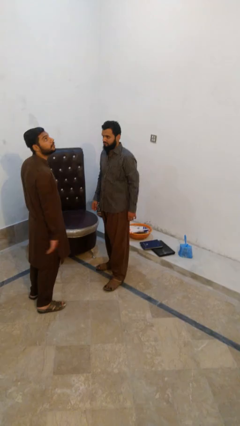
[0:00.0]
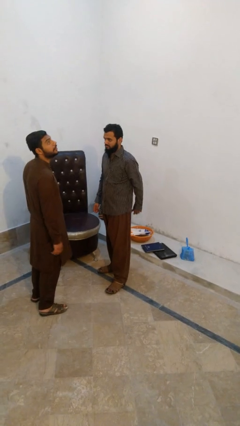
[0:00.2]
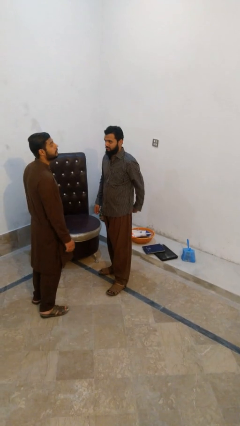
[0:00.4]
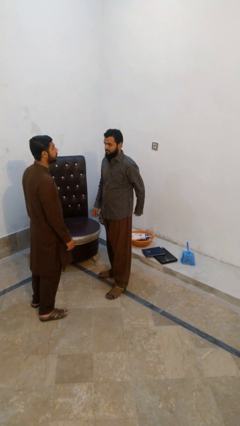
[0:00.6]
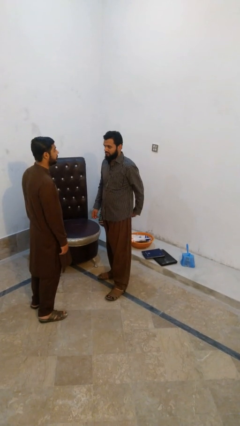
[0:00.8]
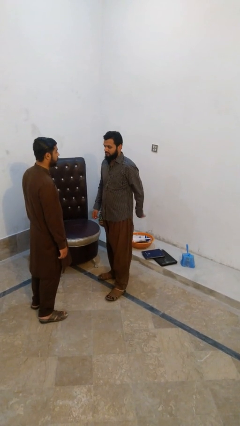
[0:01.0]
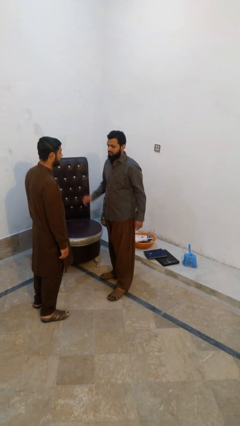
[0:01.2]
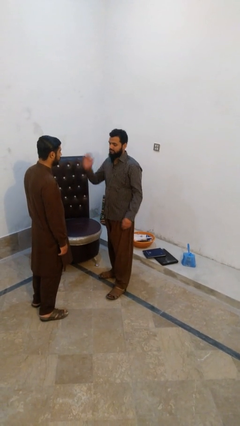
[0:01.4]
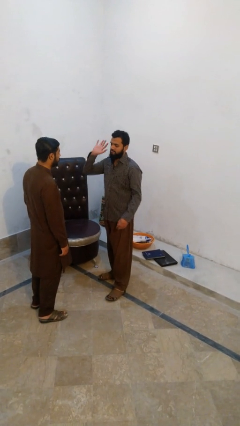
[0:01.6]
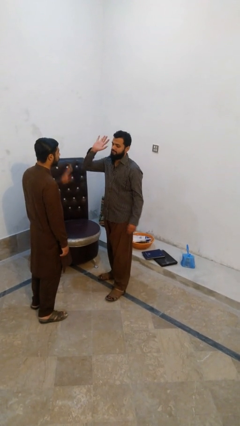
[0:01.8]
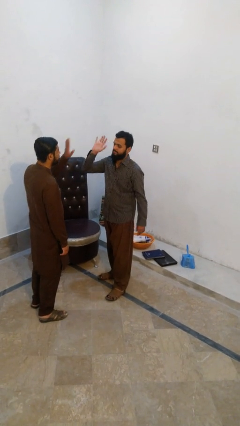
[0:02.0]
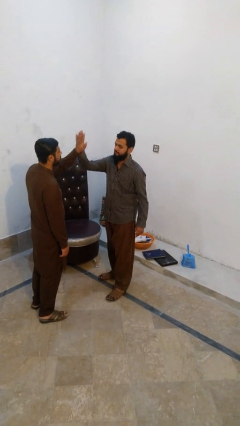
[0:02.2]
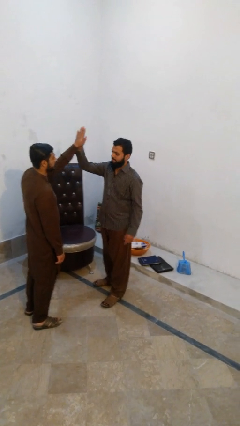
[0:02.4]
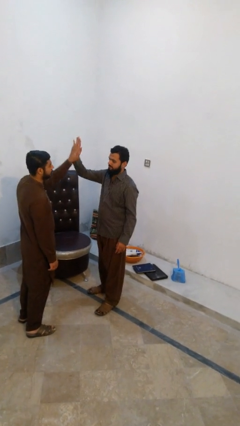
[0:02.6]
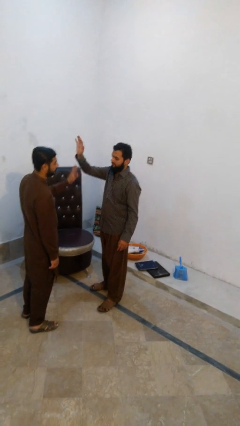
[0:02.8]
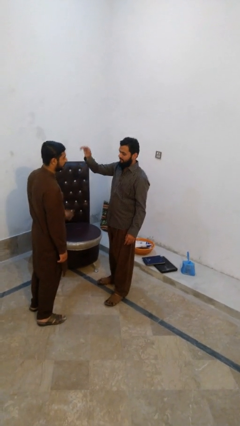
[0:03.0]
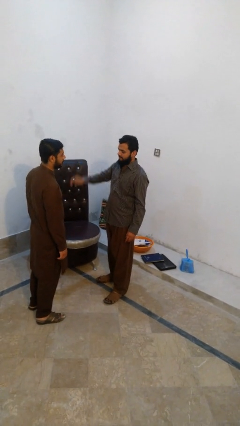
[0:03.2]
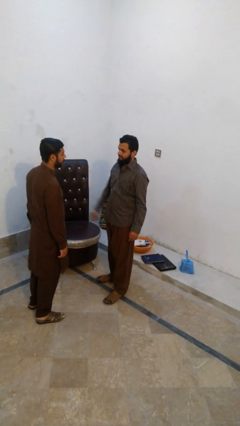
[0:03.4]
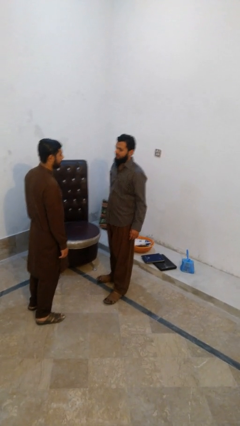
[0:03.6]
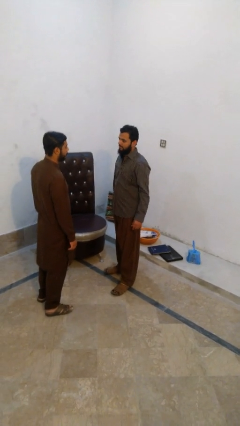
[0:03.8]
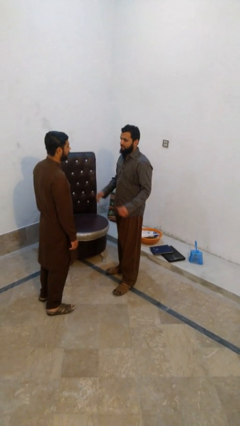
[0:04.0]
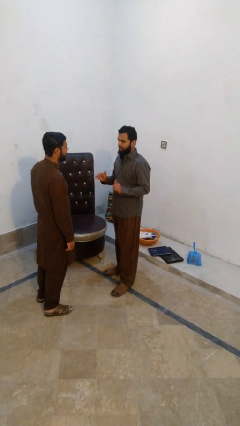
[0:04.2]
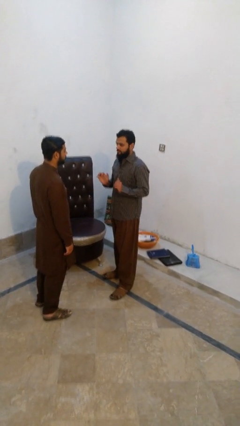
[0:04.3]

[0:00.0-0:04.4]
person highfives hand

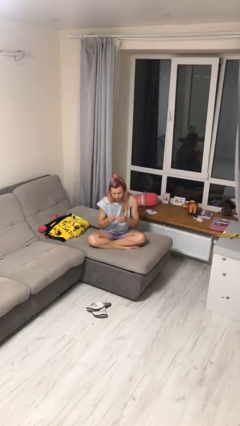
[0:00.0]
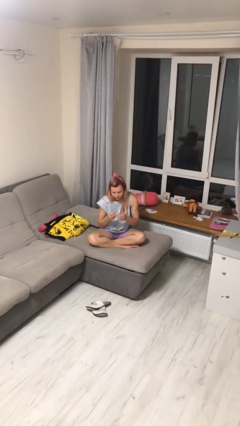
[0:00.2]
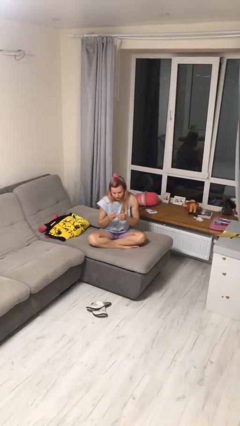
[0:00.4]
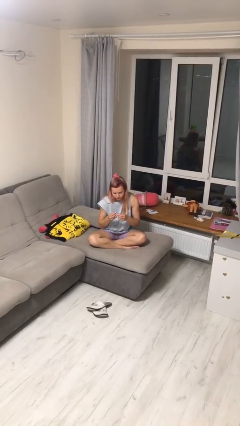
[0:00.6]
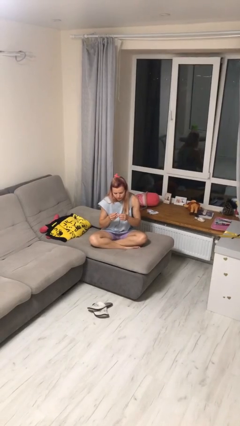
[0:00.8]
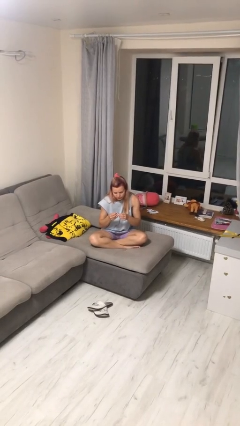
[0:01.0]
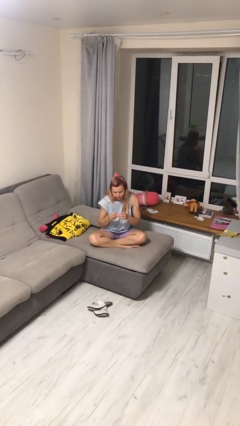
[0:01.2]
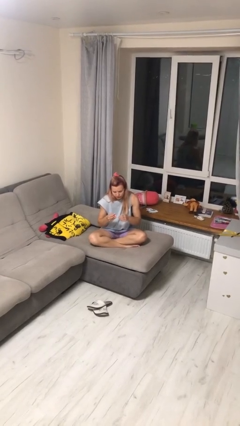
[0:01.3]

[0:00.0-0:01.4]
person clips fingernails

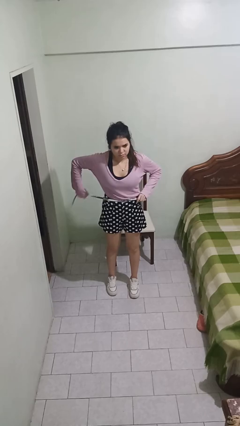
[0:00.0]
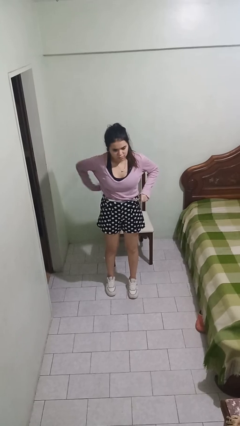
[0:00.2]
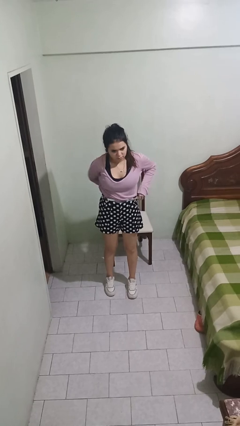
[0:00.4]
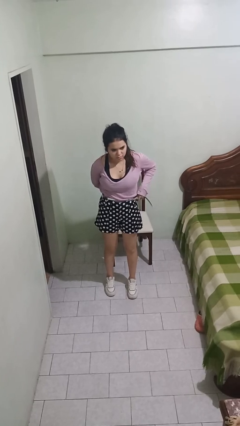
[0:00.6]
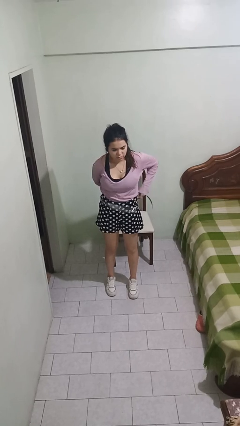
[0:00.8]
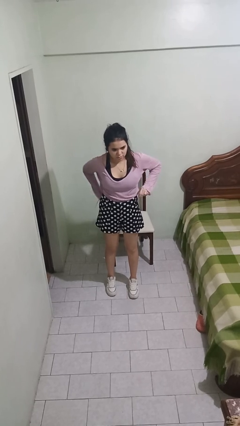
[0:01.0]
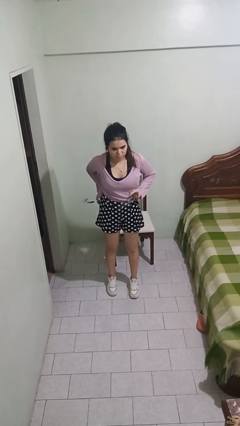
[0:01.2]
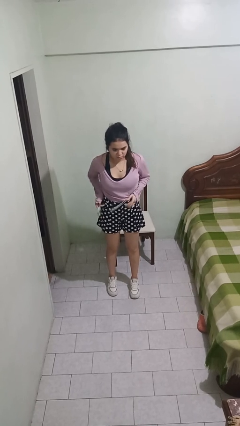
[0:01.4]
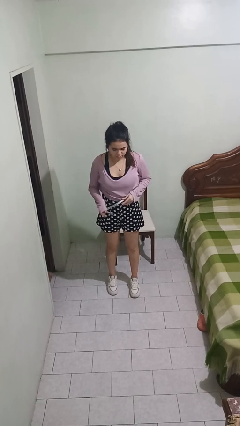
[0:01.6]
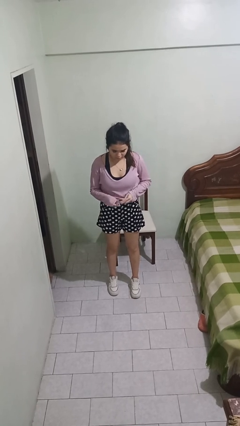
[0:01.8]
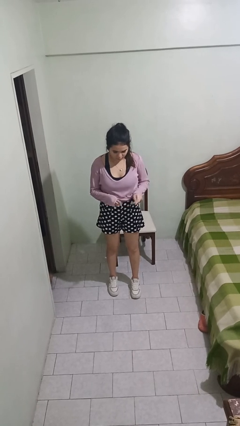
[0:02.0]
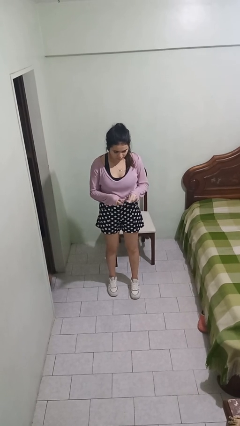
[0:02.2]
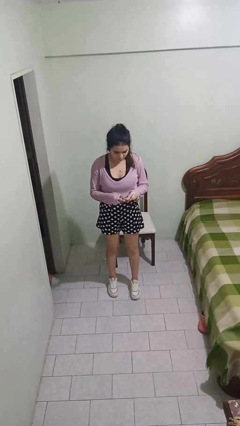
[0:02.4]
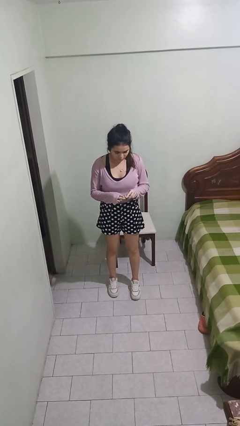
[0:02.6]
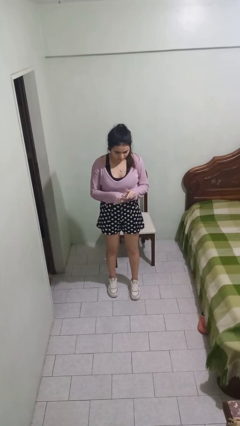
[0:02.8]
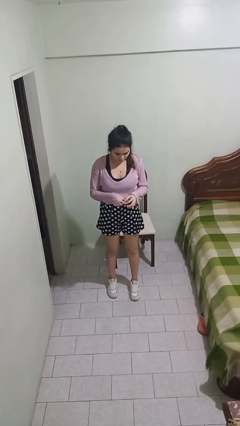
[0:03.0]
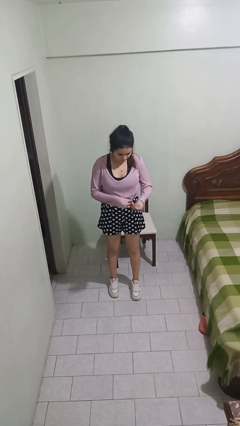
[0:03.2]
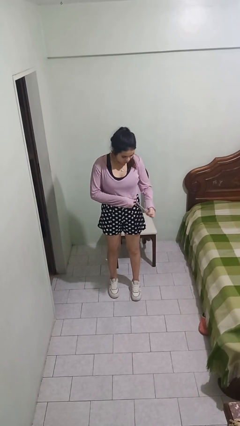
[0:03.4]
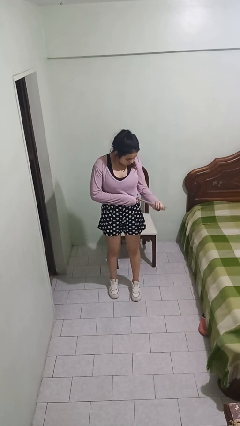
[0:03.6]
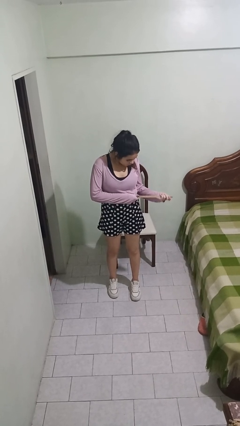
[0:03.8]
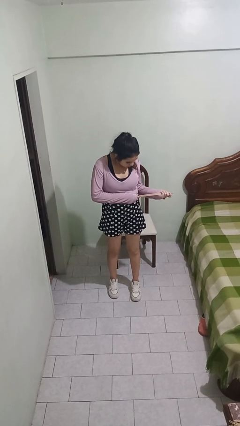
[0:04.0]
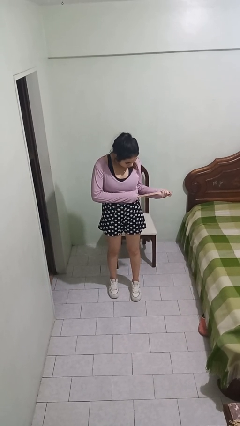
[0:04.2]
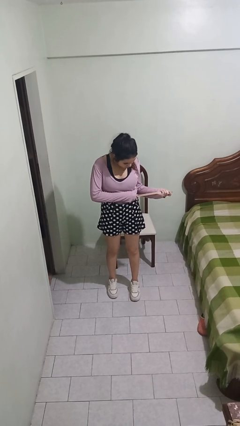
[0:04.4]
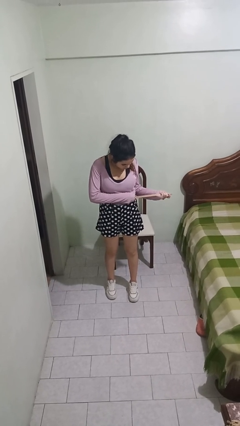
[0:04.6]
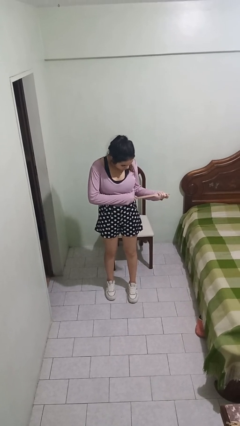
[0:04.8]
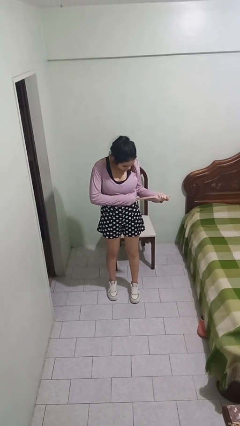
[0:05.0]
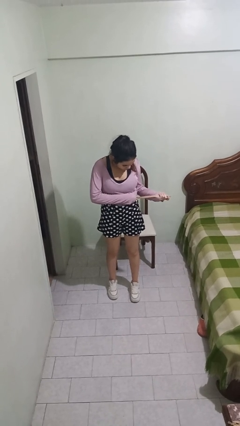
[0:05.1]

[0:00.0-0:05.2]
person puts on belt

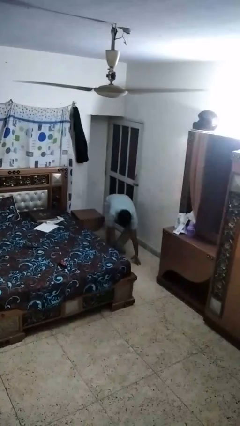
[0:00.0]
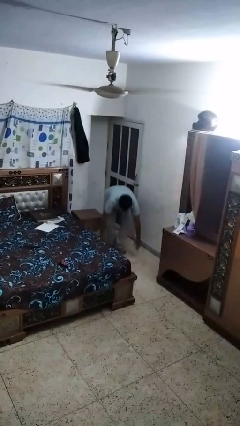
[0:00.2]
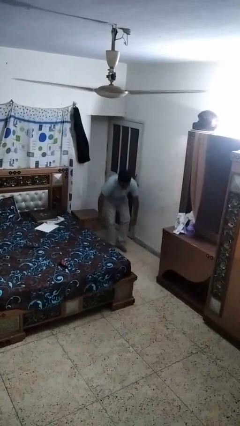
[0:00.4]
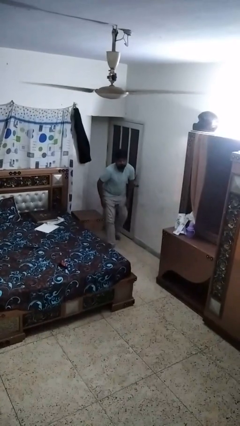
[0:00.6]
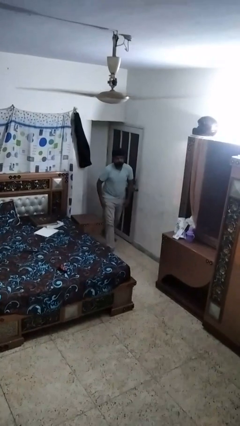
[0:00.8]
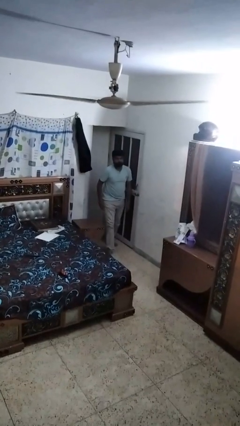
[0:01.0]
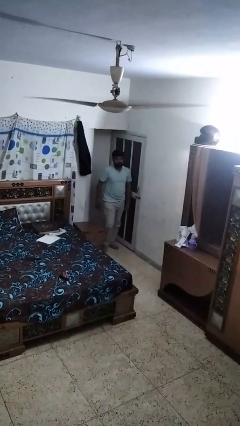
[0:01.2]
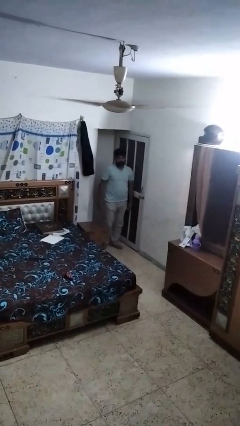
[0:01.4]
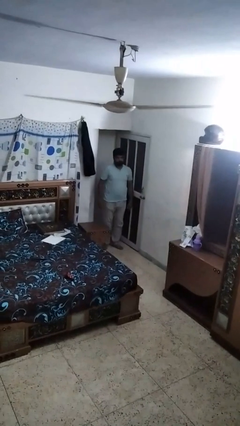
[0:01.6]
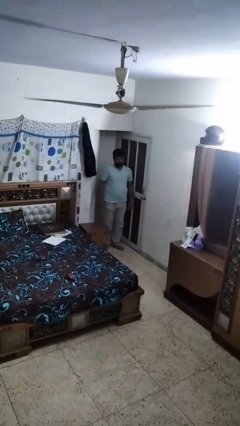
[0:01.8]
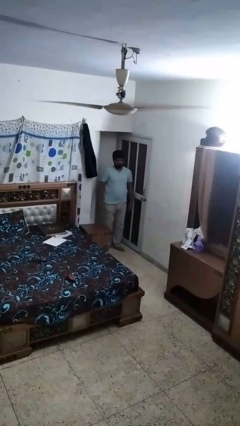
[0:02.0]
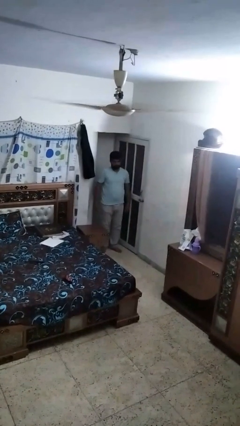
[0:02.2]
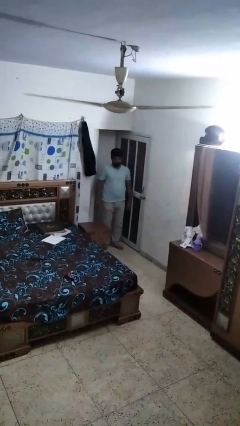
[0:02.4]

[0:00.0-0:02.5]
person stands up from floor

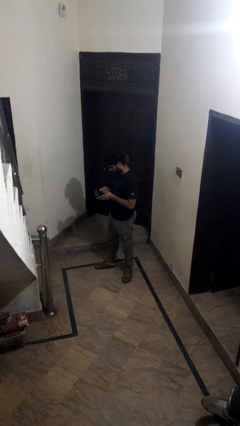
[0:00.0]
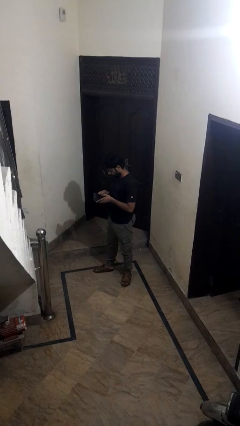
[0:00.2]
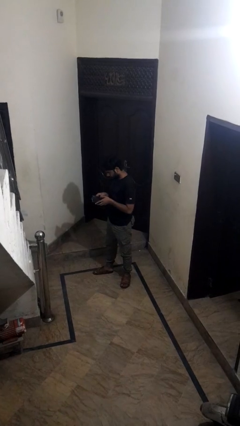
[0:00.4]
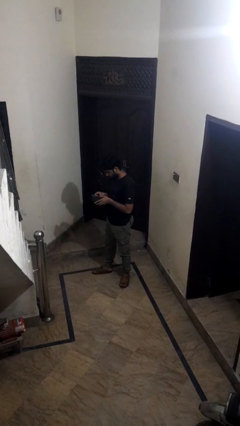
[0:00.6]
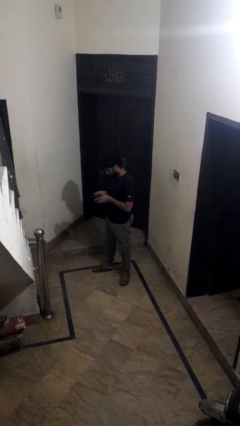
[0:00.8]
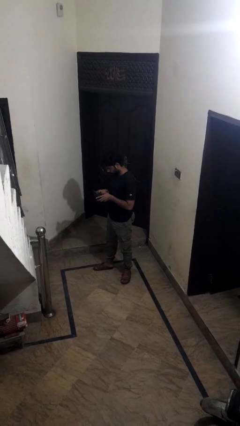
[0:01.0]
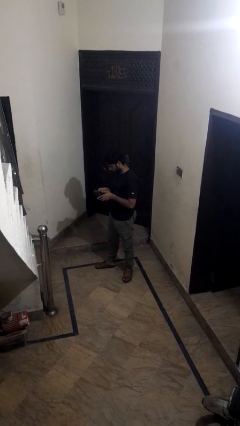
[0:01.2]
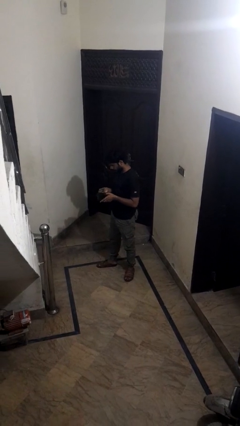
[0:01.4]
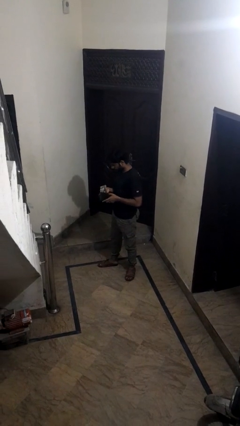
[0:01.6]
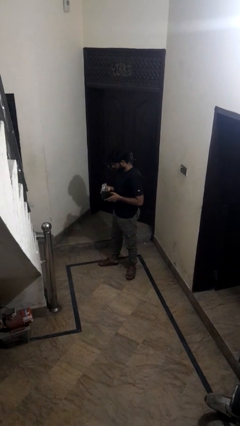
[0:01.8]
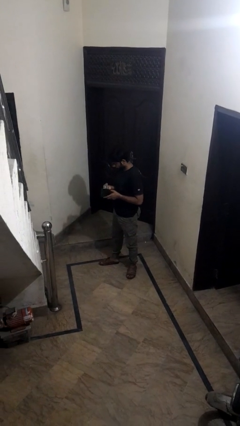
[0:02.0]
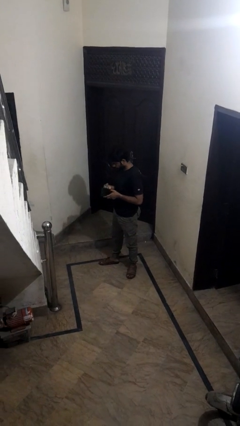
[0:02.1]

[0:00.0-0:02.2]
person takes object from purse

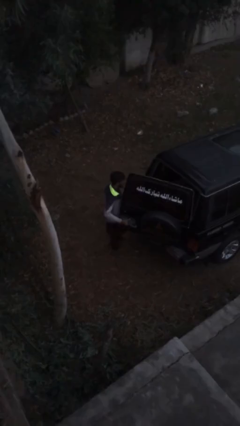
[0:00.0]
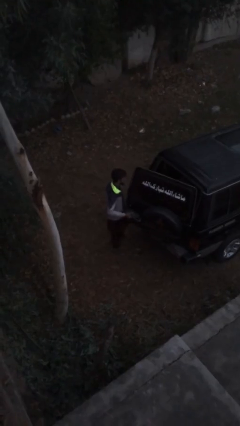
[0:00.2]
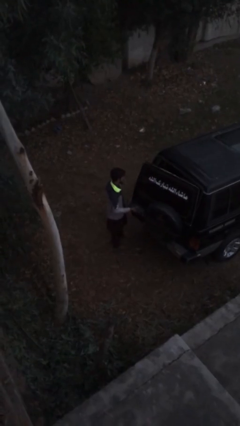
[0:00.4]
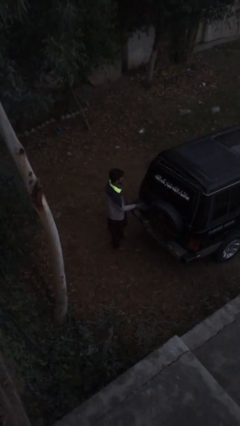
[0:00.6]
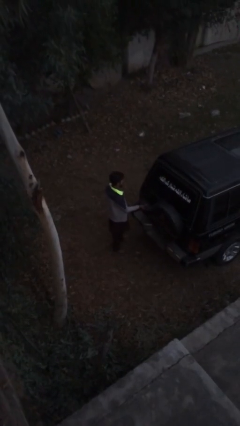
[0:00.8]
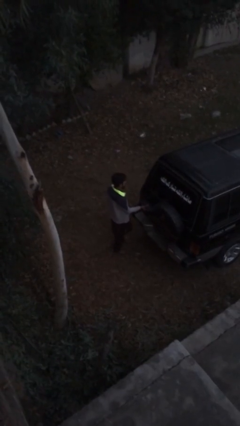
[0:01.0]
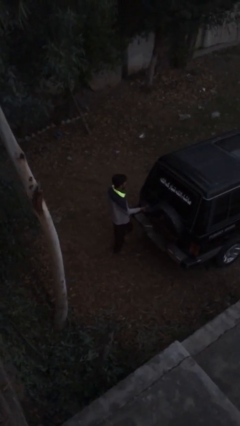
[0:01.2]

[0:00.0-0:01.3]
person closes car trunk

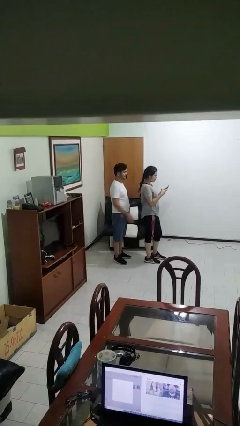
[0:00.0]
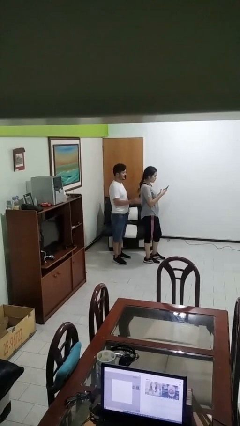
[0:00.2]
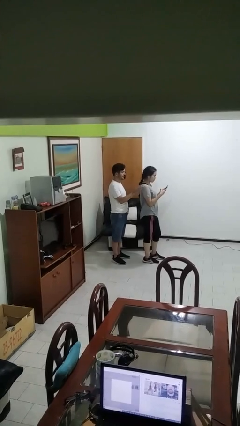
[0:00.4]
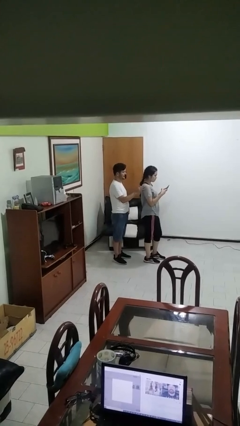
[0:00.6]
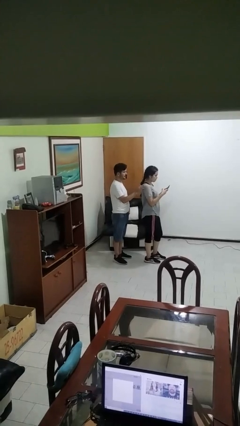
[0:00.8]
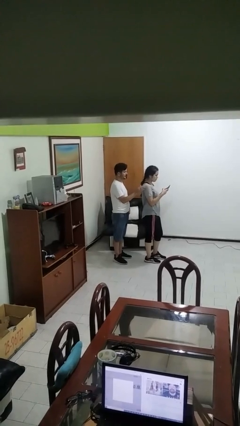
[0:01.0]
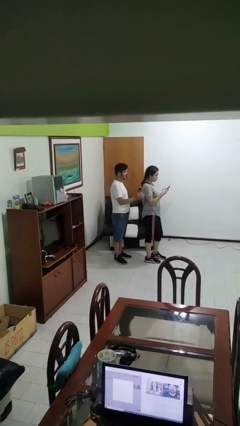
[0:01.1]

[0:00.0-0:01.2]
person touches back of person
